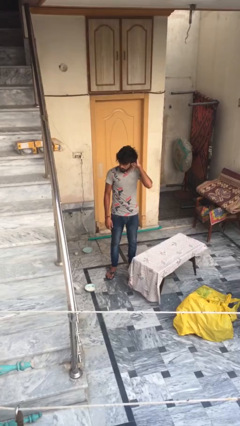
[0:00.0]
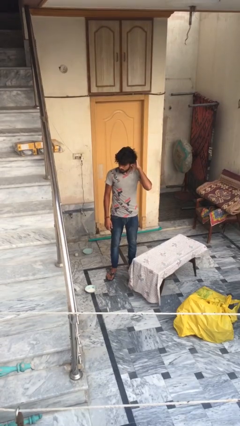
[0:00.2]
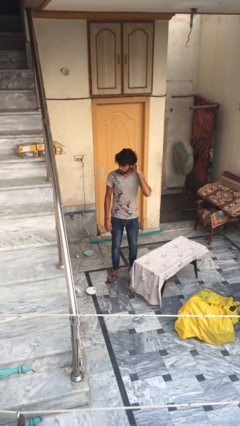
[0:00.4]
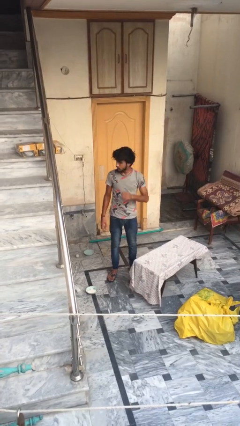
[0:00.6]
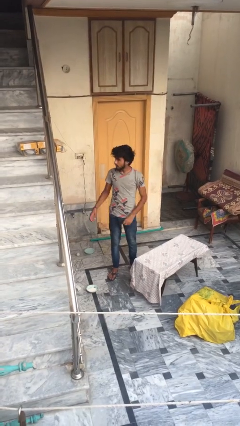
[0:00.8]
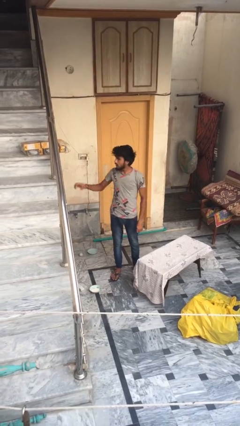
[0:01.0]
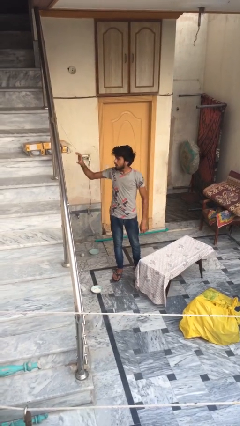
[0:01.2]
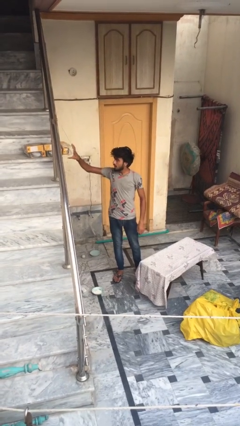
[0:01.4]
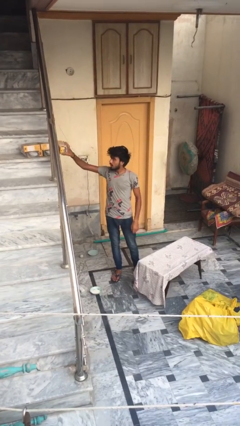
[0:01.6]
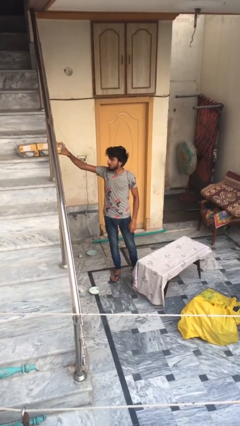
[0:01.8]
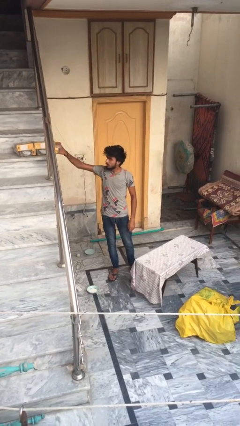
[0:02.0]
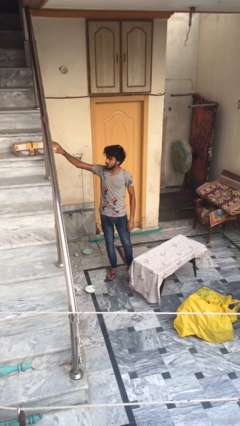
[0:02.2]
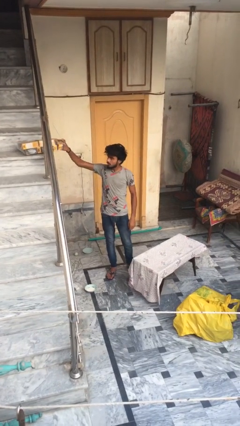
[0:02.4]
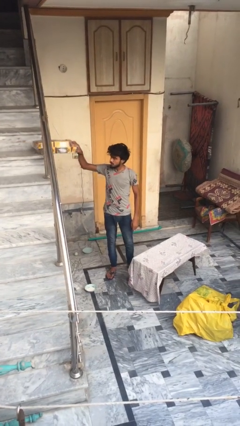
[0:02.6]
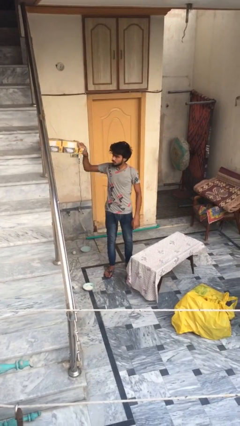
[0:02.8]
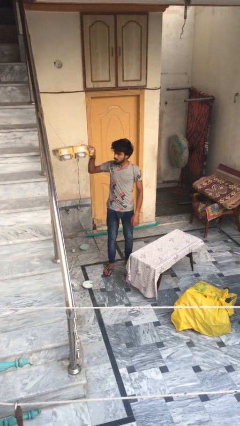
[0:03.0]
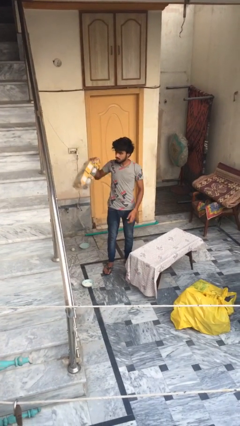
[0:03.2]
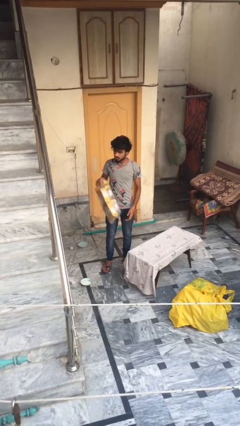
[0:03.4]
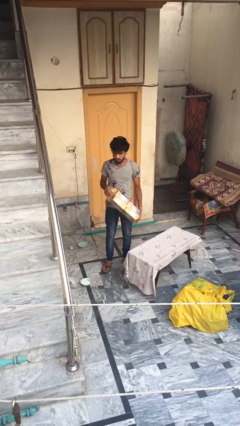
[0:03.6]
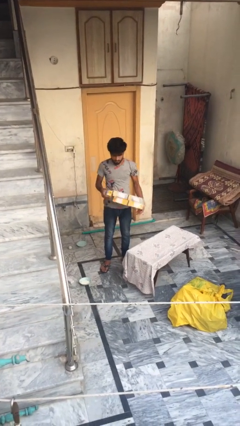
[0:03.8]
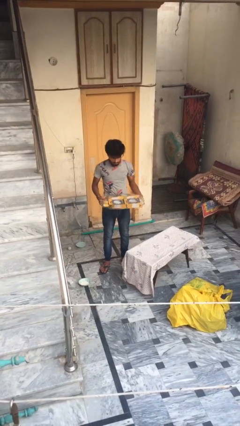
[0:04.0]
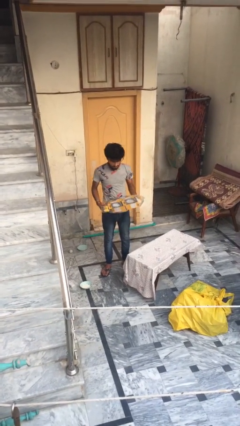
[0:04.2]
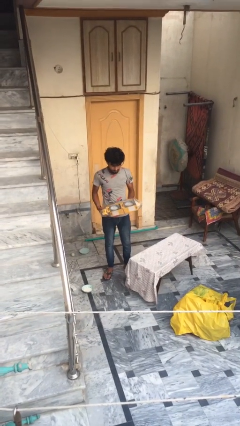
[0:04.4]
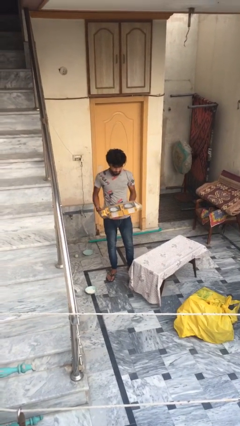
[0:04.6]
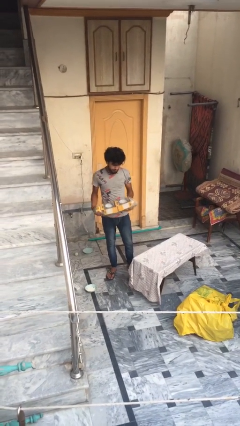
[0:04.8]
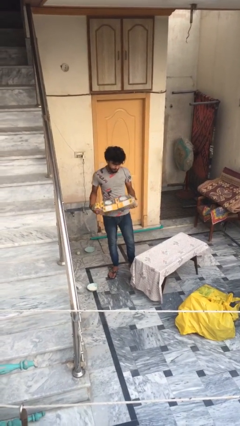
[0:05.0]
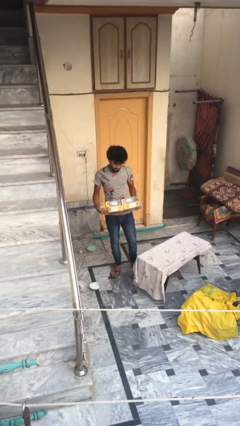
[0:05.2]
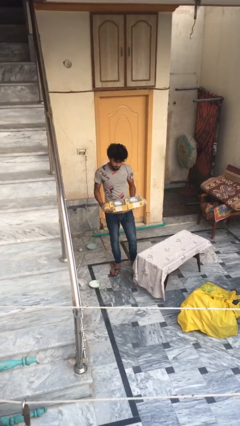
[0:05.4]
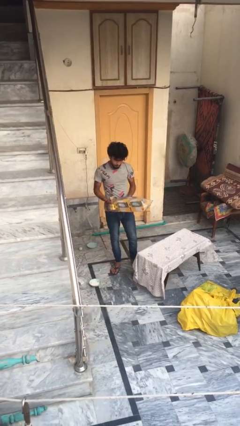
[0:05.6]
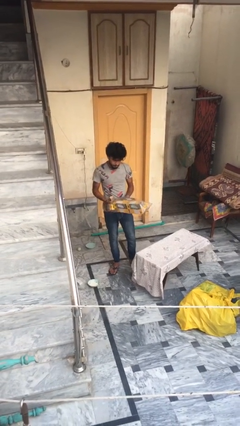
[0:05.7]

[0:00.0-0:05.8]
person picks up object from shelf

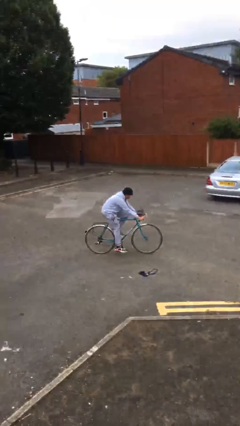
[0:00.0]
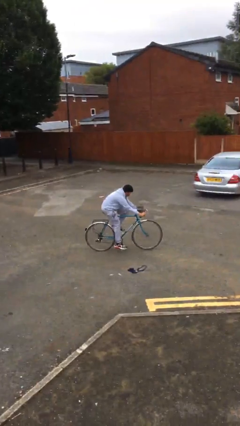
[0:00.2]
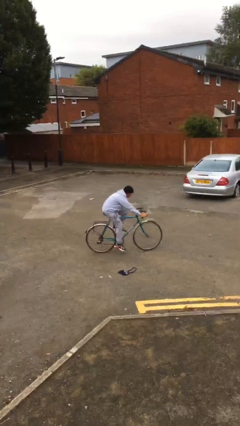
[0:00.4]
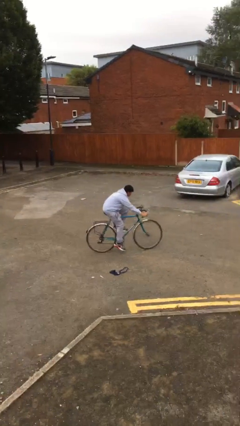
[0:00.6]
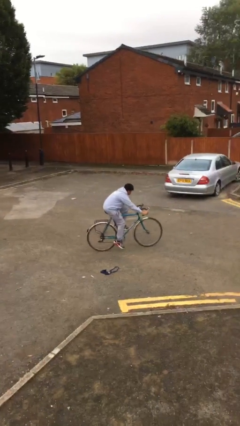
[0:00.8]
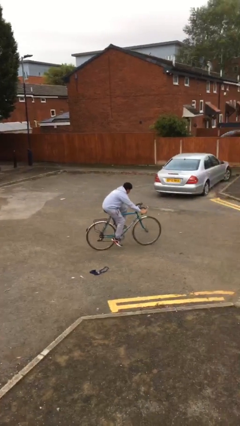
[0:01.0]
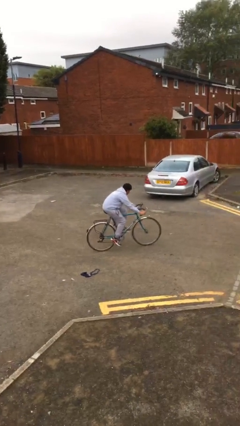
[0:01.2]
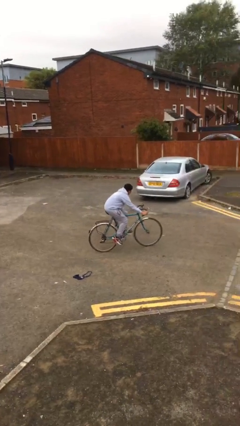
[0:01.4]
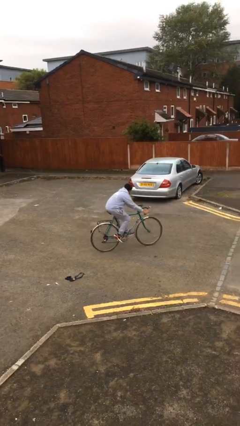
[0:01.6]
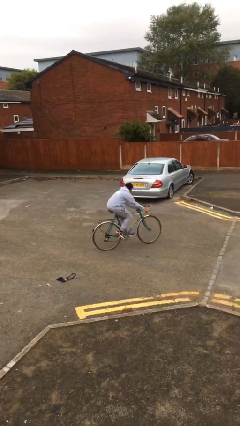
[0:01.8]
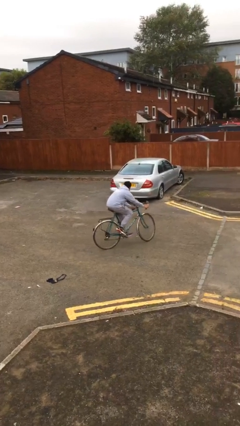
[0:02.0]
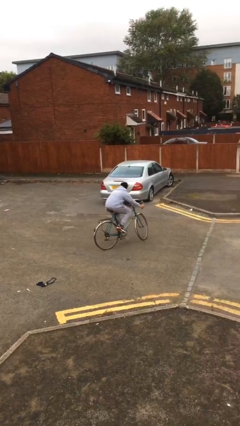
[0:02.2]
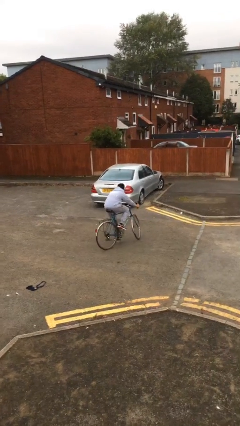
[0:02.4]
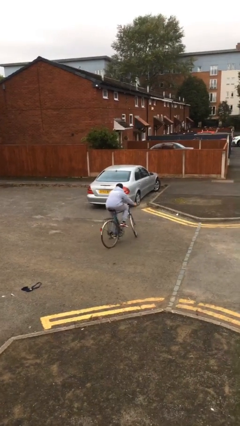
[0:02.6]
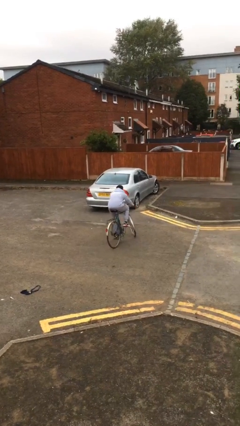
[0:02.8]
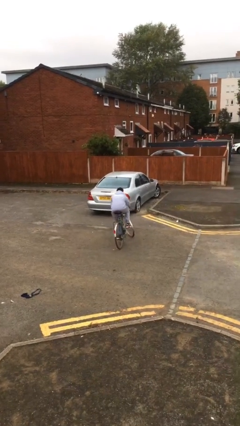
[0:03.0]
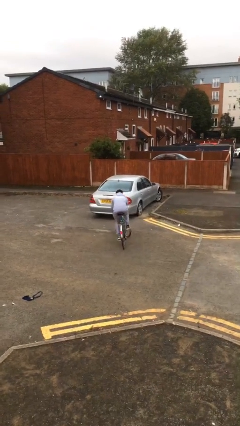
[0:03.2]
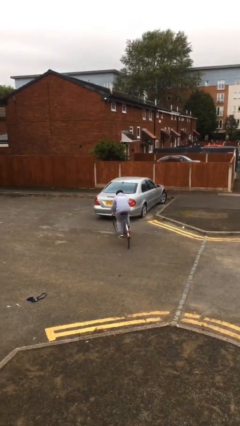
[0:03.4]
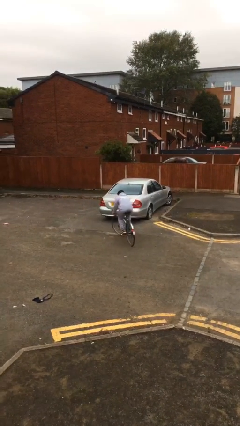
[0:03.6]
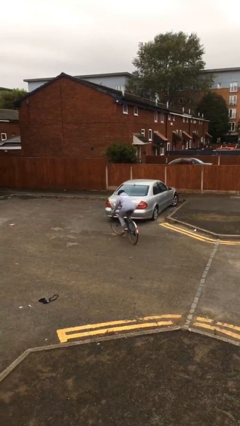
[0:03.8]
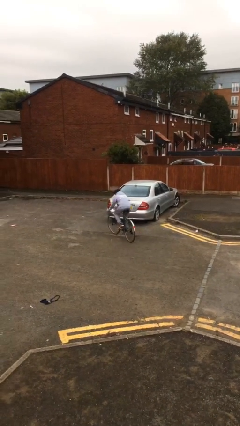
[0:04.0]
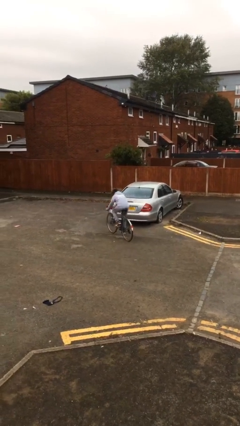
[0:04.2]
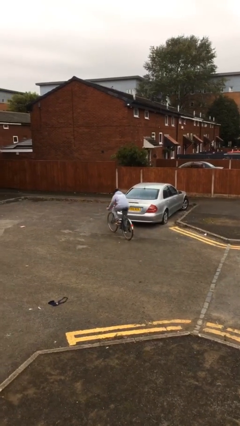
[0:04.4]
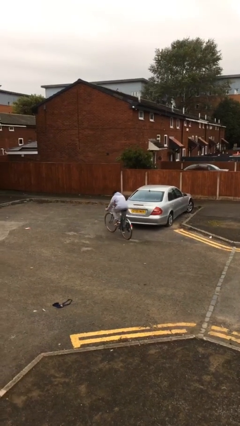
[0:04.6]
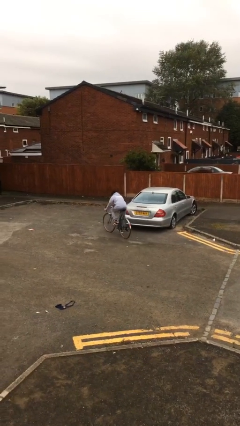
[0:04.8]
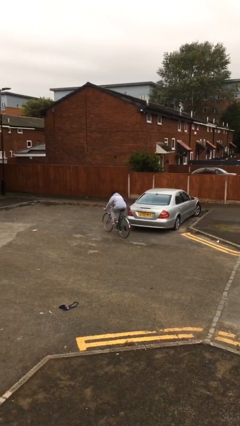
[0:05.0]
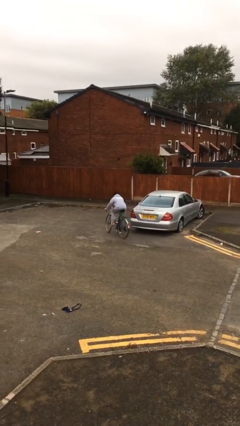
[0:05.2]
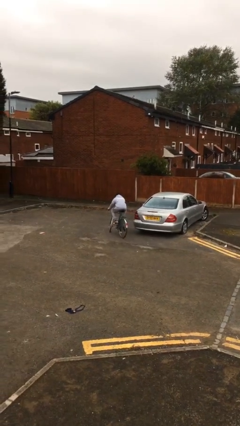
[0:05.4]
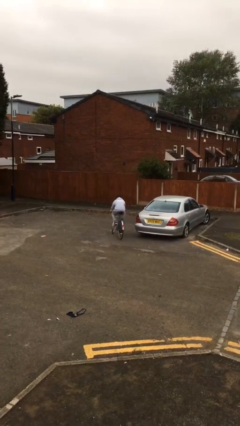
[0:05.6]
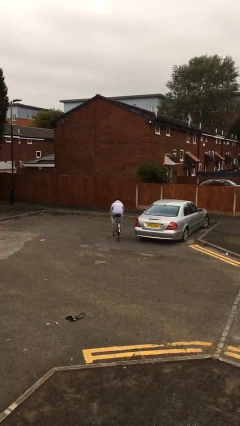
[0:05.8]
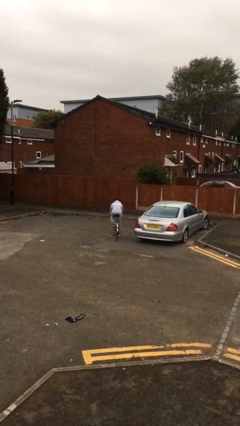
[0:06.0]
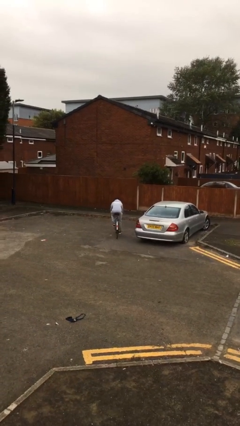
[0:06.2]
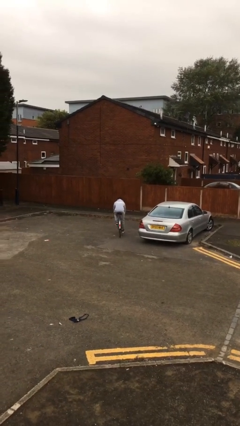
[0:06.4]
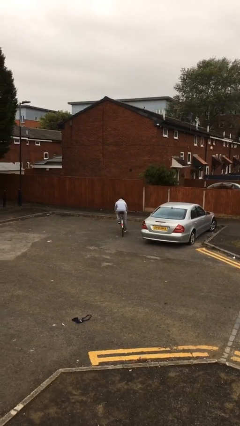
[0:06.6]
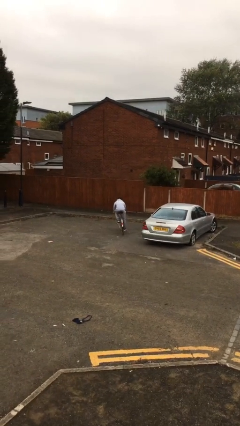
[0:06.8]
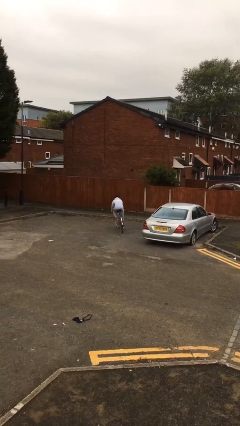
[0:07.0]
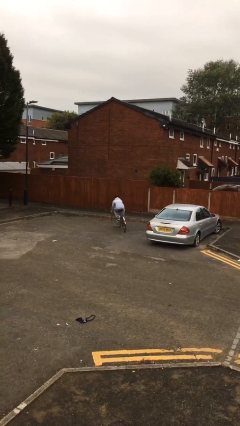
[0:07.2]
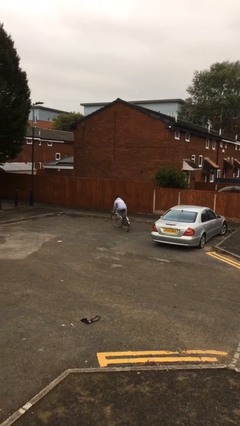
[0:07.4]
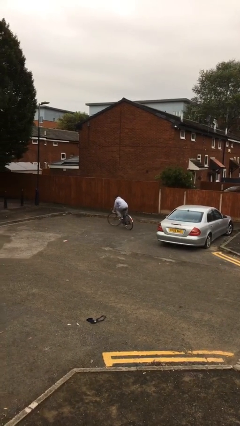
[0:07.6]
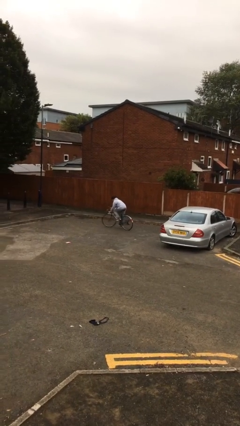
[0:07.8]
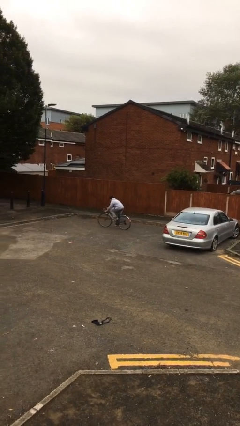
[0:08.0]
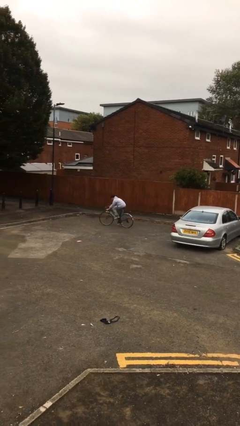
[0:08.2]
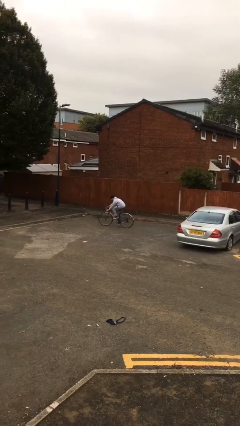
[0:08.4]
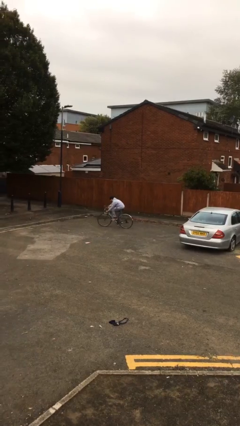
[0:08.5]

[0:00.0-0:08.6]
person rides bicycle

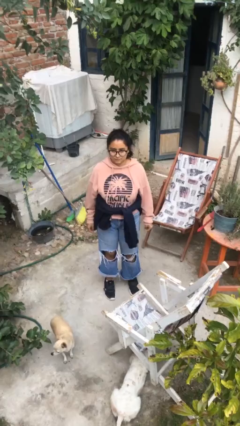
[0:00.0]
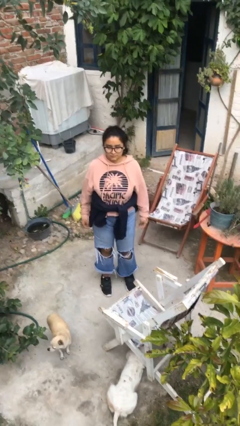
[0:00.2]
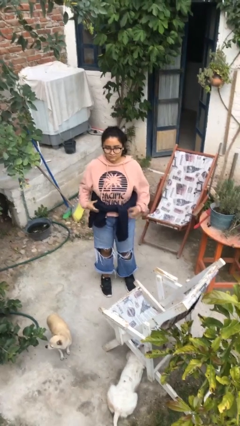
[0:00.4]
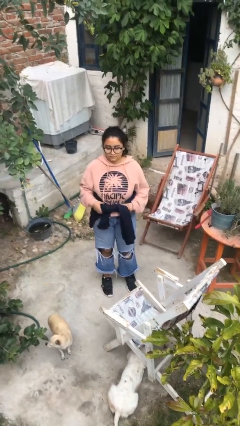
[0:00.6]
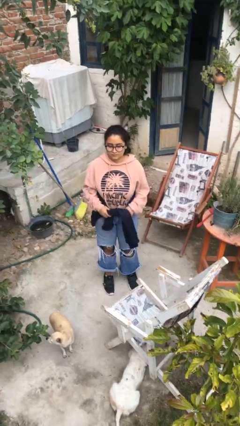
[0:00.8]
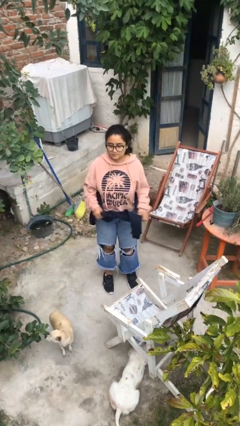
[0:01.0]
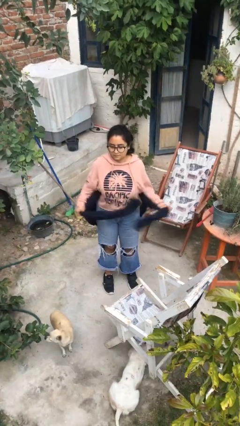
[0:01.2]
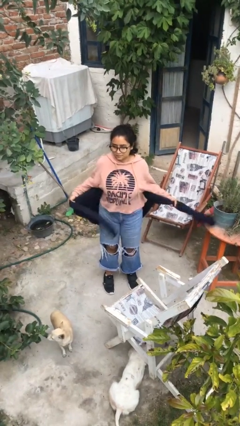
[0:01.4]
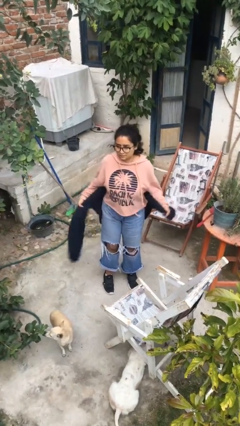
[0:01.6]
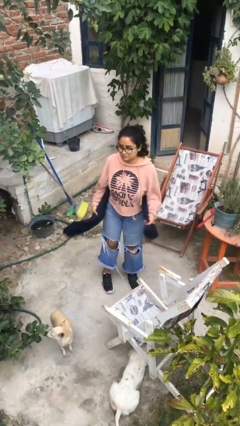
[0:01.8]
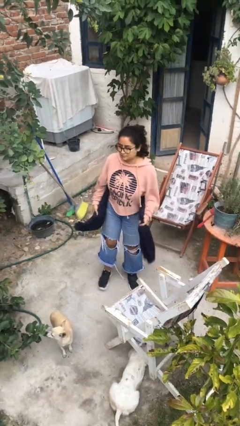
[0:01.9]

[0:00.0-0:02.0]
person unties jacket around waist

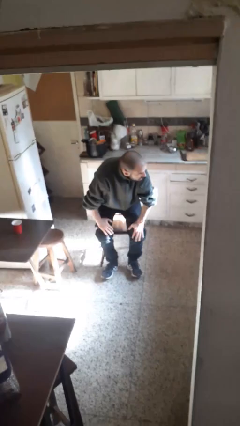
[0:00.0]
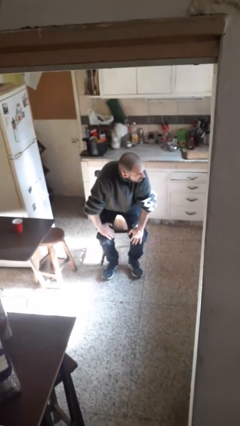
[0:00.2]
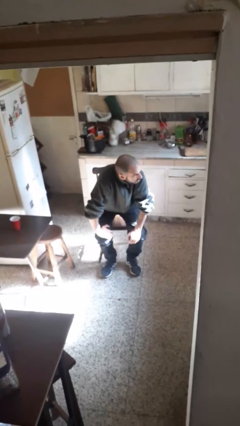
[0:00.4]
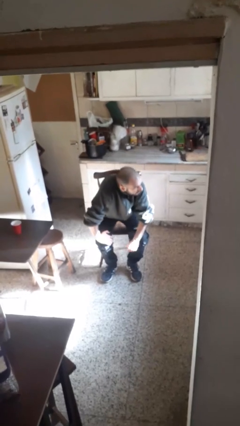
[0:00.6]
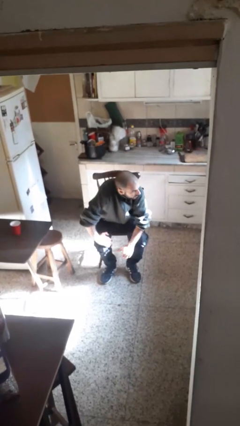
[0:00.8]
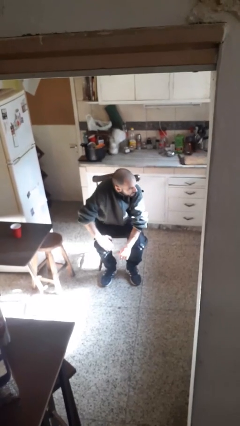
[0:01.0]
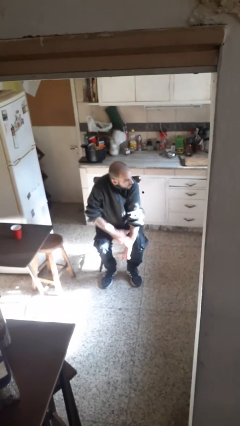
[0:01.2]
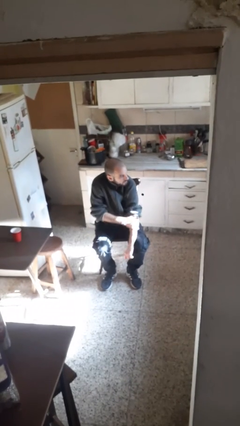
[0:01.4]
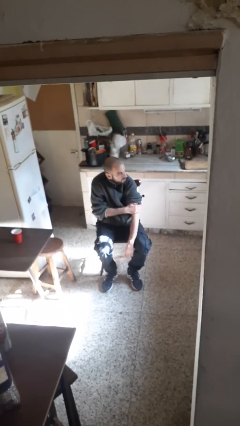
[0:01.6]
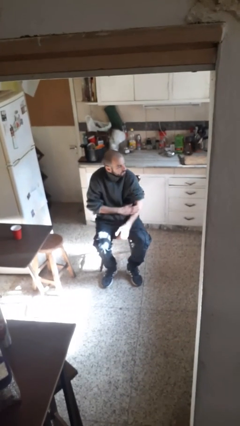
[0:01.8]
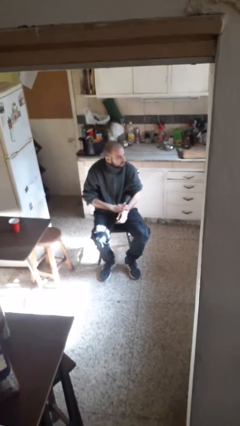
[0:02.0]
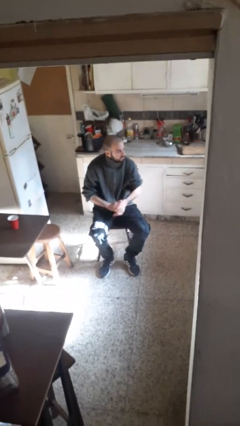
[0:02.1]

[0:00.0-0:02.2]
person sits down
